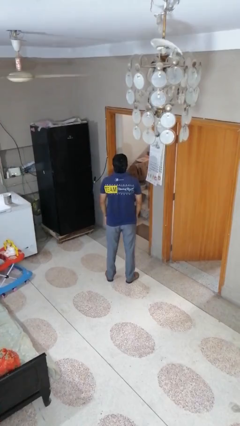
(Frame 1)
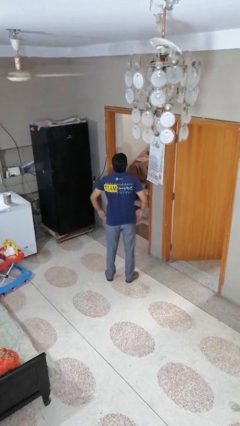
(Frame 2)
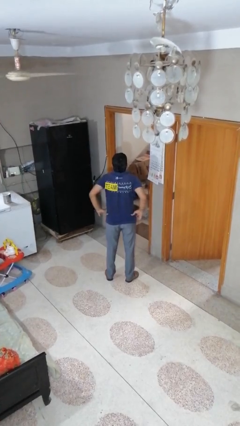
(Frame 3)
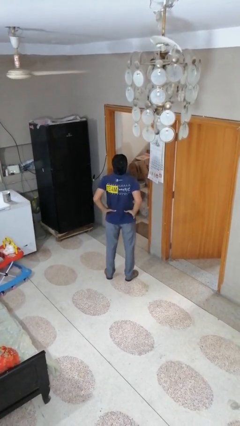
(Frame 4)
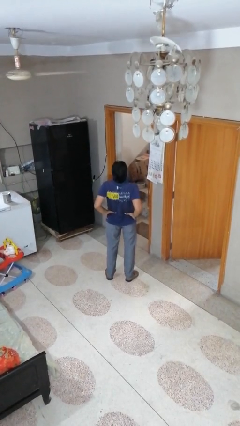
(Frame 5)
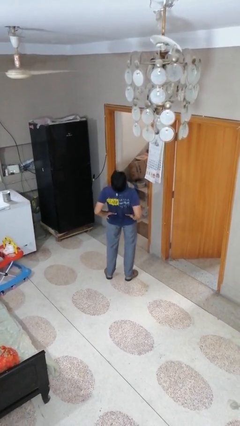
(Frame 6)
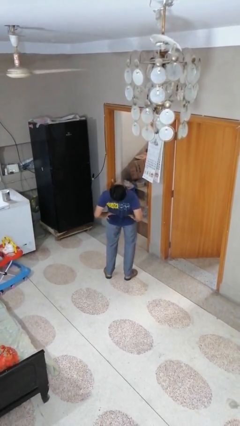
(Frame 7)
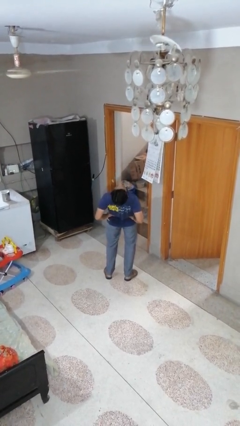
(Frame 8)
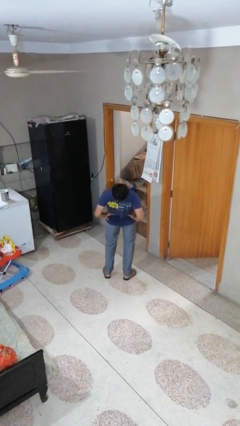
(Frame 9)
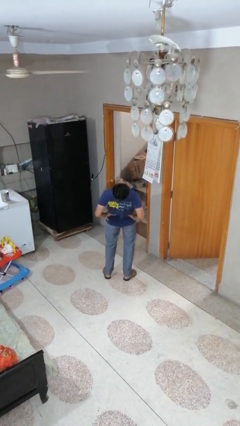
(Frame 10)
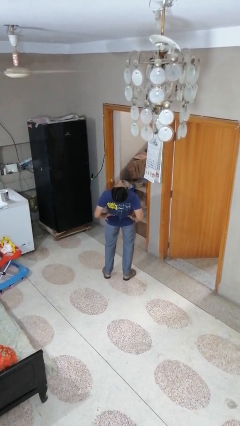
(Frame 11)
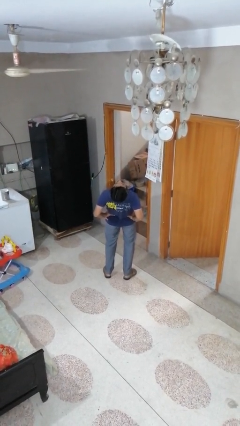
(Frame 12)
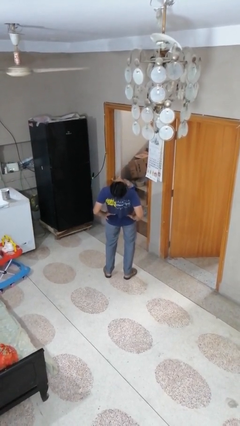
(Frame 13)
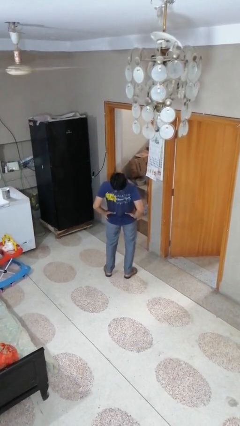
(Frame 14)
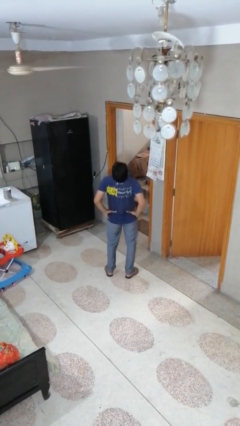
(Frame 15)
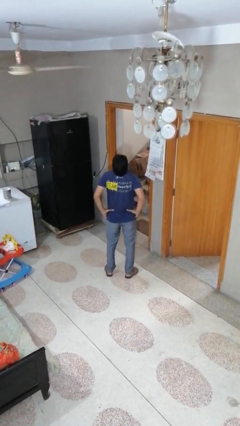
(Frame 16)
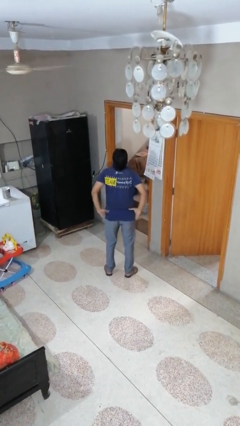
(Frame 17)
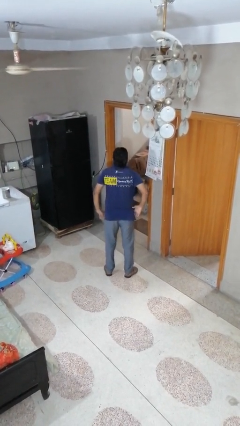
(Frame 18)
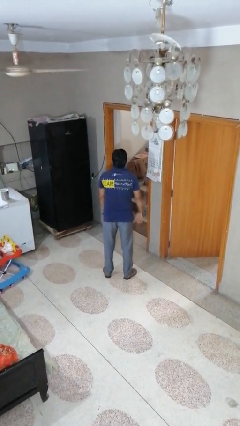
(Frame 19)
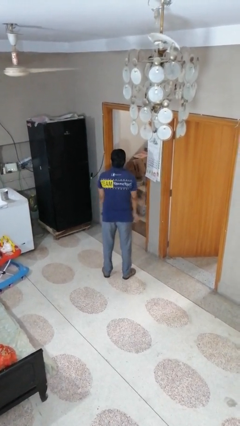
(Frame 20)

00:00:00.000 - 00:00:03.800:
person stretches back

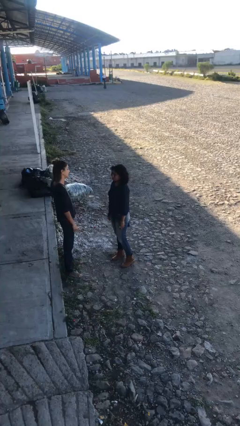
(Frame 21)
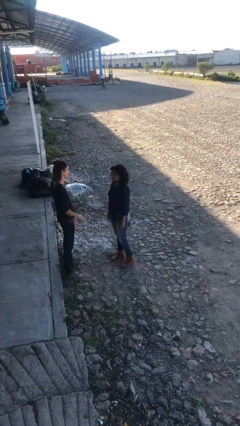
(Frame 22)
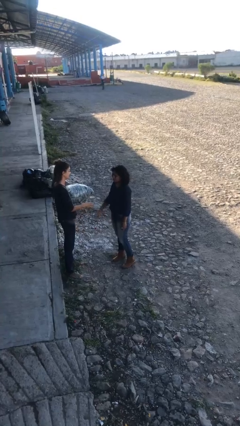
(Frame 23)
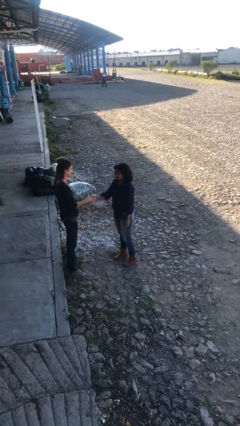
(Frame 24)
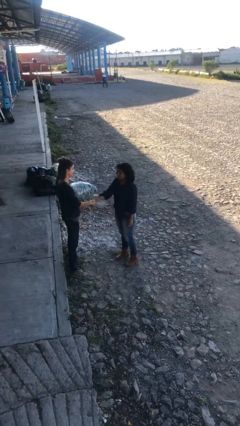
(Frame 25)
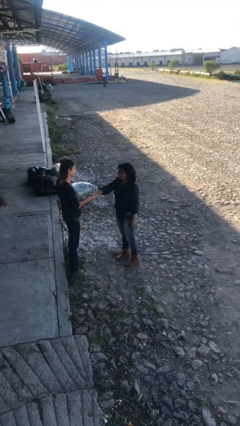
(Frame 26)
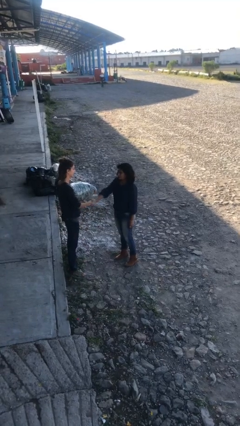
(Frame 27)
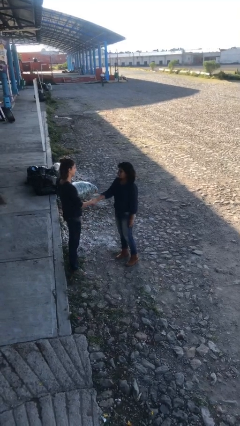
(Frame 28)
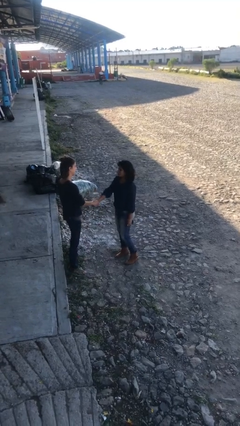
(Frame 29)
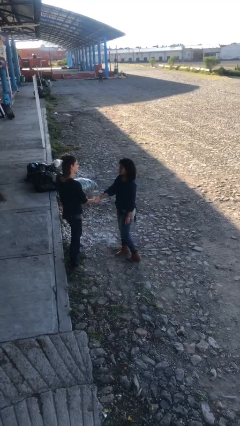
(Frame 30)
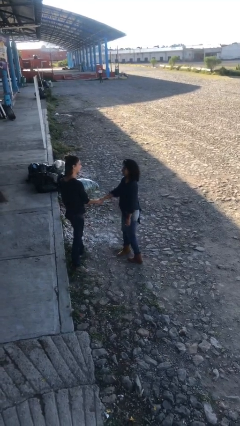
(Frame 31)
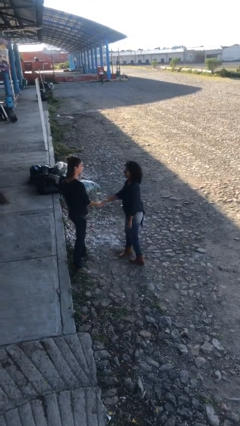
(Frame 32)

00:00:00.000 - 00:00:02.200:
person shakes hand

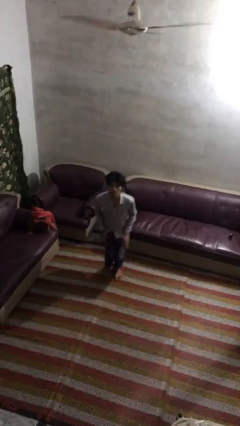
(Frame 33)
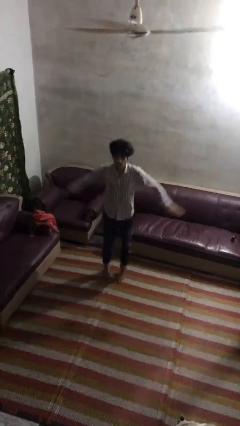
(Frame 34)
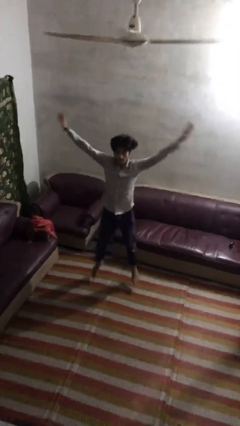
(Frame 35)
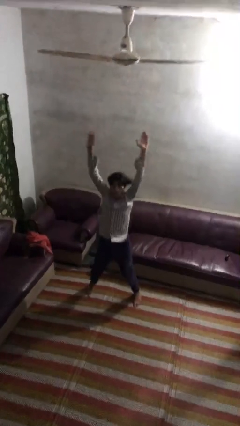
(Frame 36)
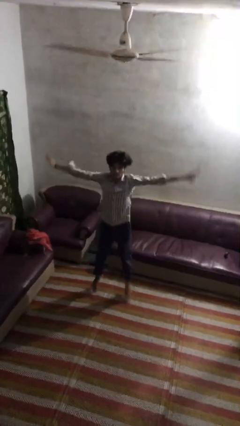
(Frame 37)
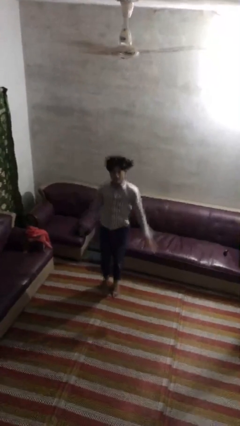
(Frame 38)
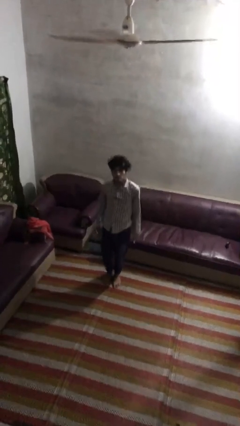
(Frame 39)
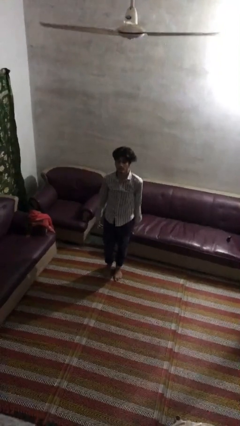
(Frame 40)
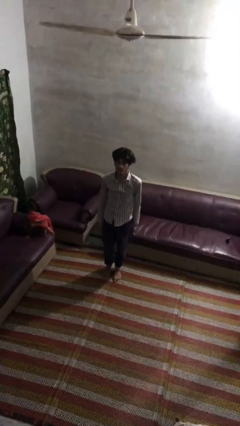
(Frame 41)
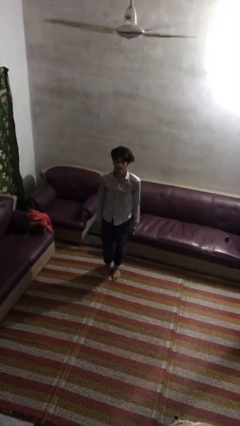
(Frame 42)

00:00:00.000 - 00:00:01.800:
person exercises with jumping jacks

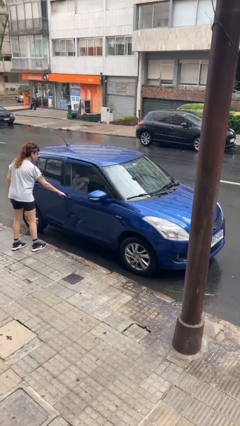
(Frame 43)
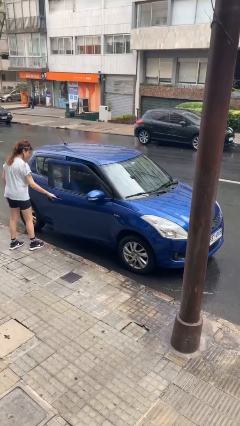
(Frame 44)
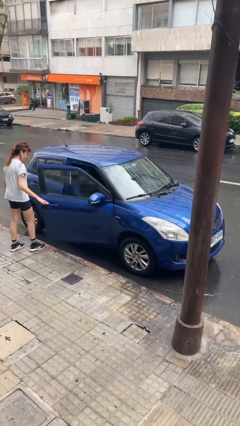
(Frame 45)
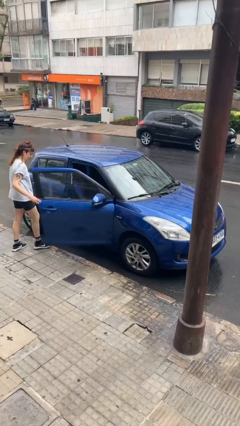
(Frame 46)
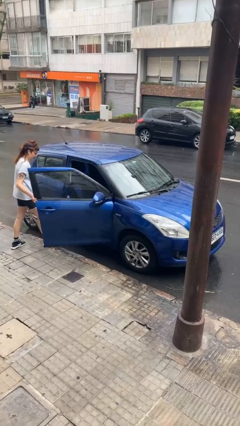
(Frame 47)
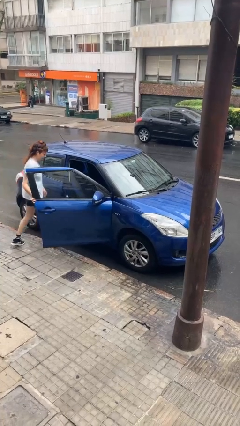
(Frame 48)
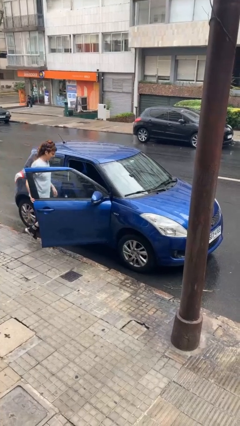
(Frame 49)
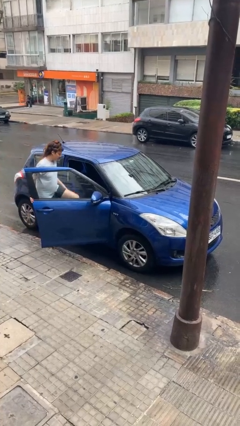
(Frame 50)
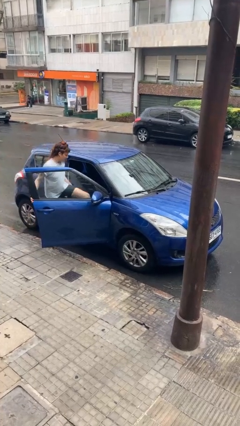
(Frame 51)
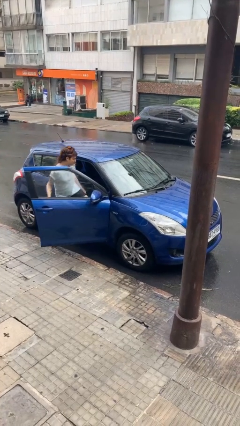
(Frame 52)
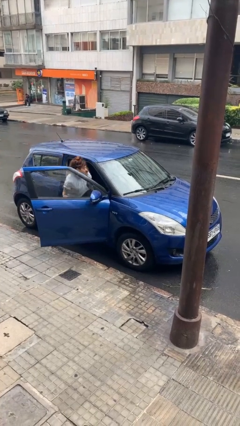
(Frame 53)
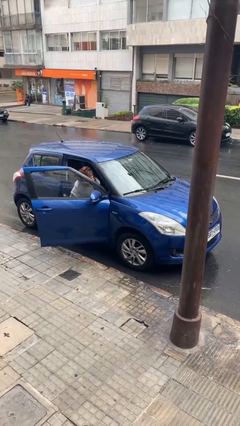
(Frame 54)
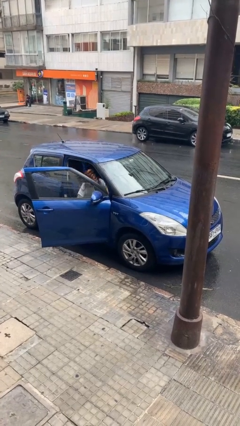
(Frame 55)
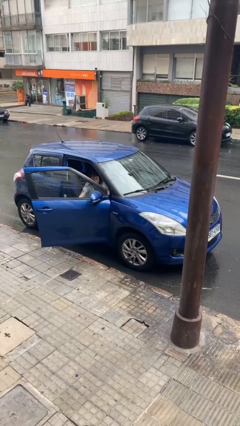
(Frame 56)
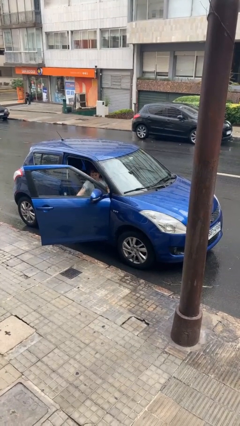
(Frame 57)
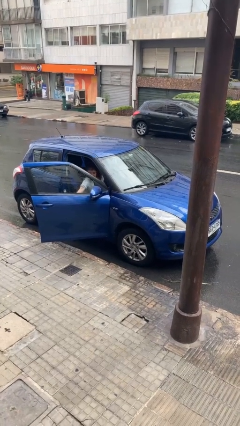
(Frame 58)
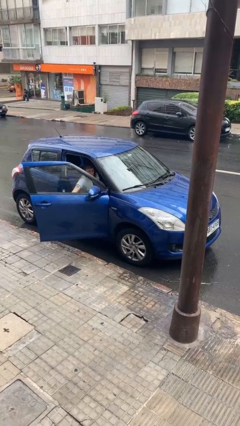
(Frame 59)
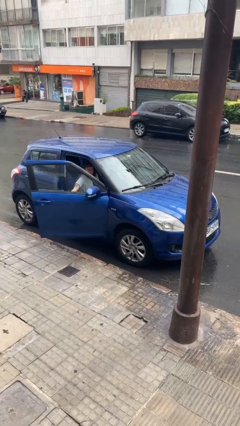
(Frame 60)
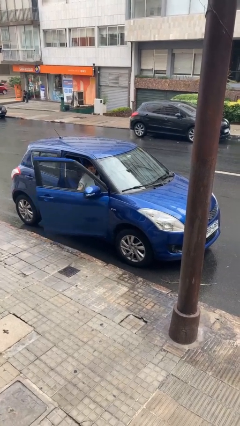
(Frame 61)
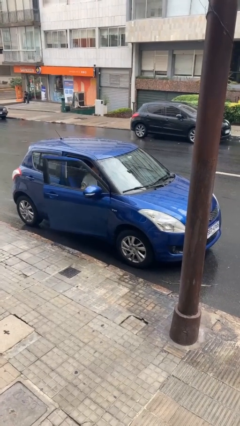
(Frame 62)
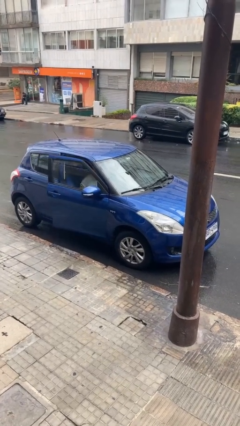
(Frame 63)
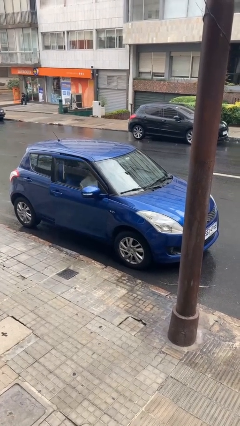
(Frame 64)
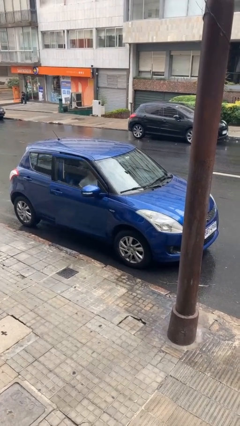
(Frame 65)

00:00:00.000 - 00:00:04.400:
car picks up person

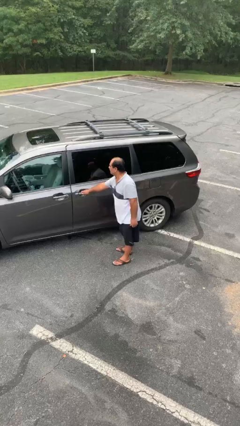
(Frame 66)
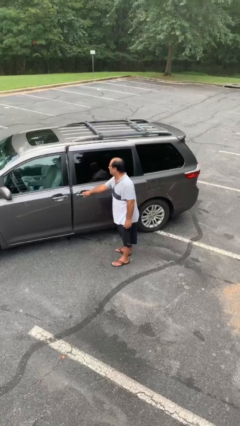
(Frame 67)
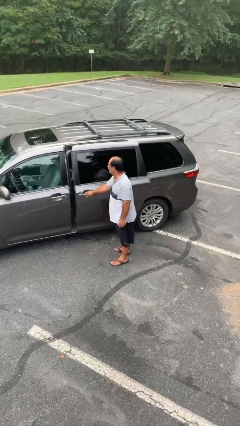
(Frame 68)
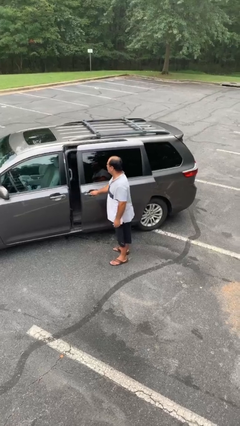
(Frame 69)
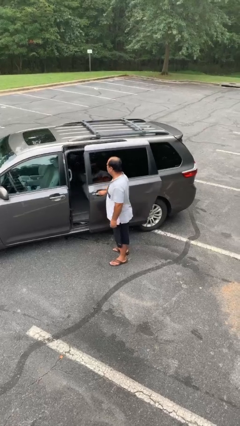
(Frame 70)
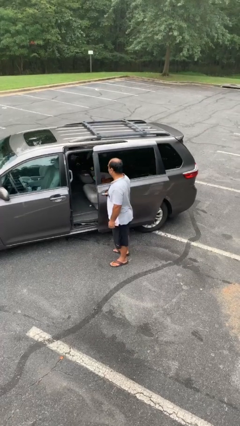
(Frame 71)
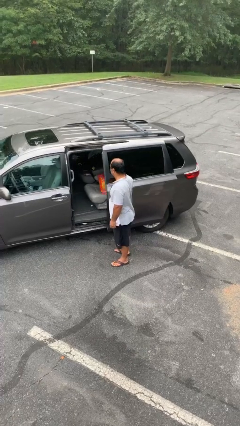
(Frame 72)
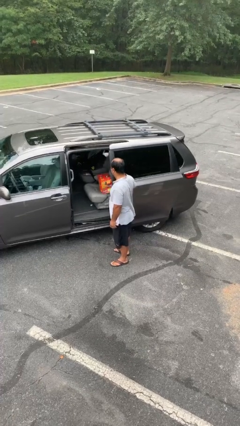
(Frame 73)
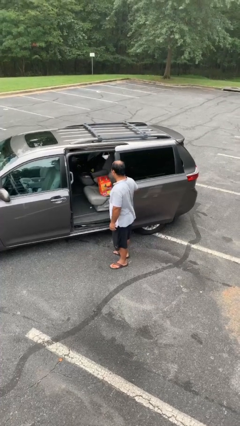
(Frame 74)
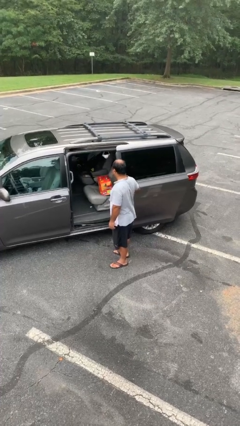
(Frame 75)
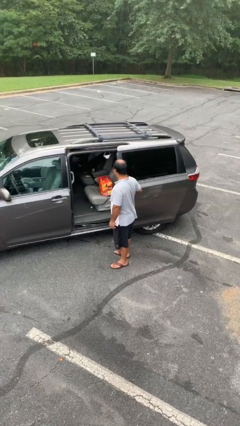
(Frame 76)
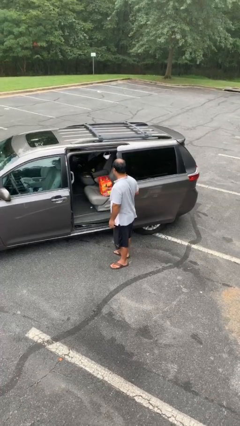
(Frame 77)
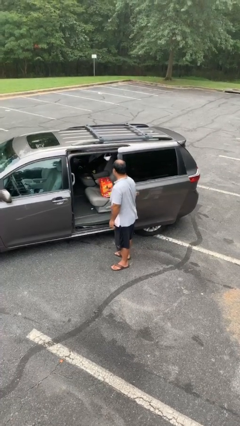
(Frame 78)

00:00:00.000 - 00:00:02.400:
person opens car door

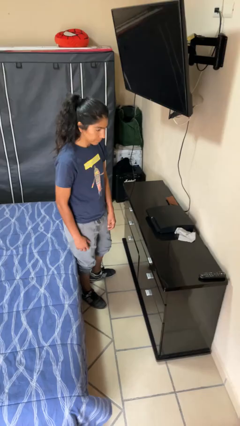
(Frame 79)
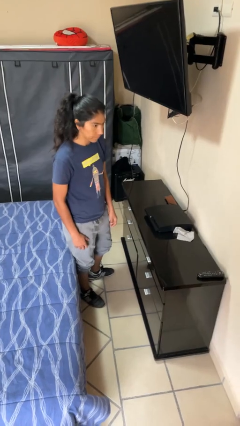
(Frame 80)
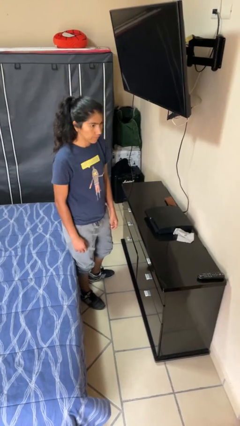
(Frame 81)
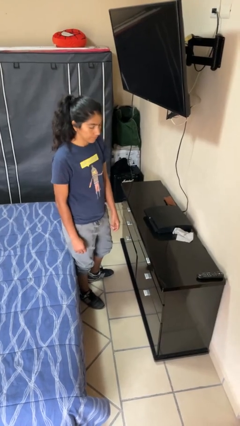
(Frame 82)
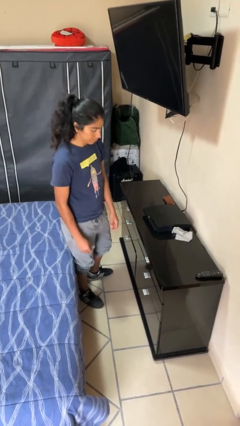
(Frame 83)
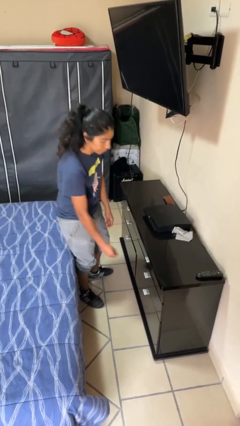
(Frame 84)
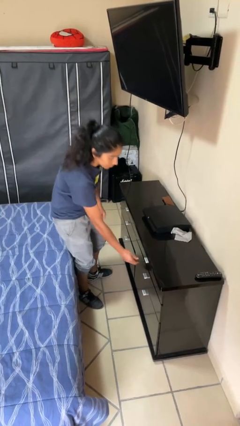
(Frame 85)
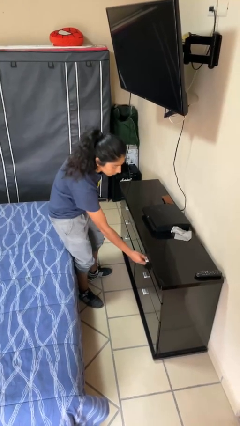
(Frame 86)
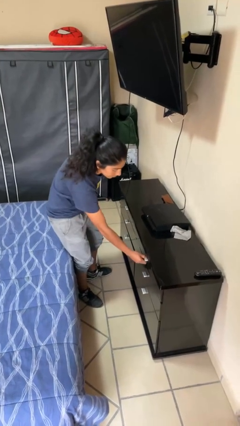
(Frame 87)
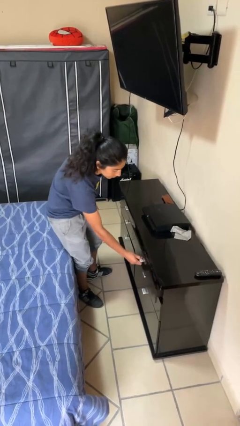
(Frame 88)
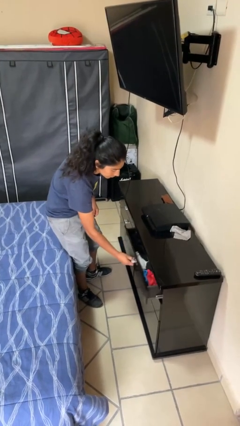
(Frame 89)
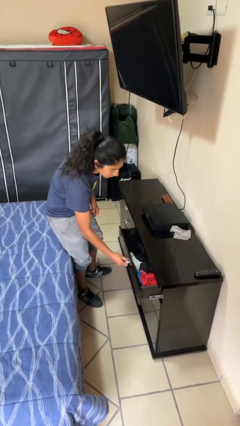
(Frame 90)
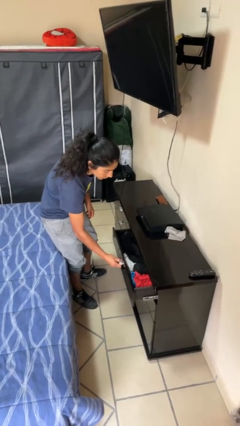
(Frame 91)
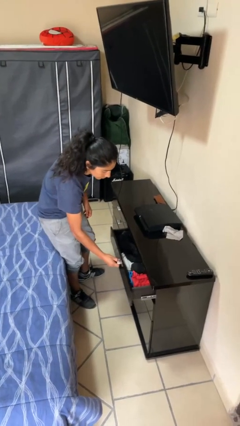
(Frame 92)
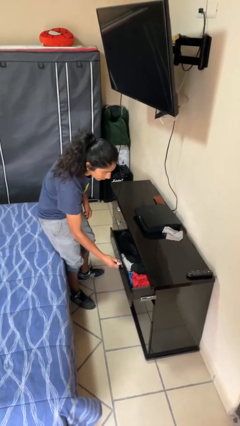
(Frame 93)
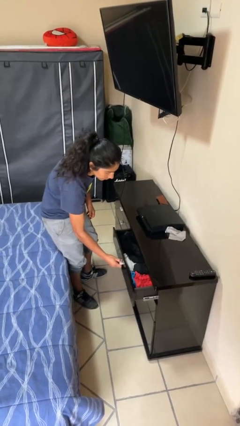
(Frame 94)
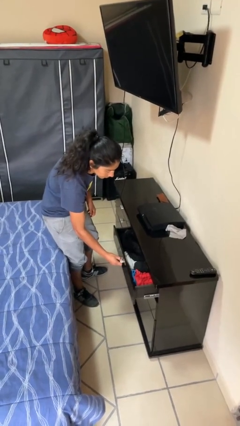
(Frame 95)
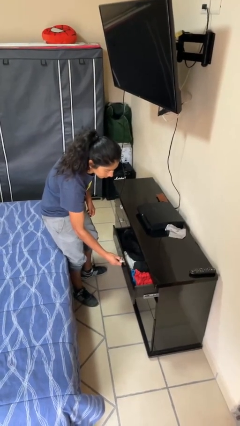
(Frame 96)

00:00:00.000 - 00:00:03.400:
person opens dresser drawer
